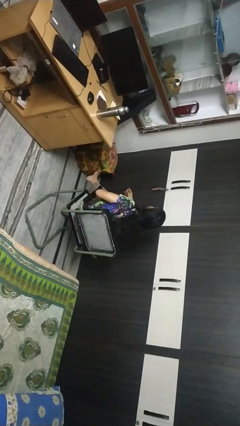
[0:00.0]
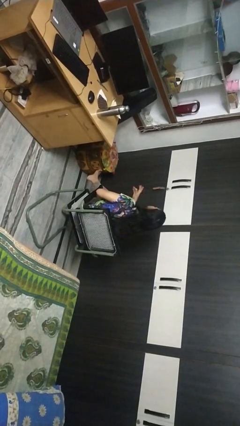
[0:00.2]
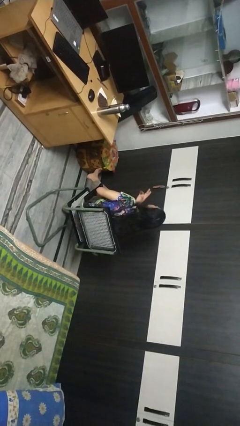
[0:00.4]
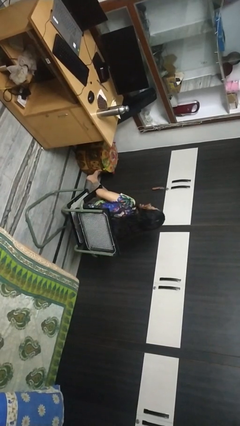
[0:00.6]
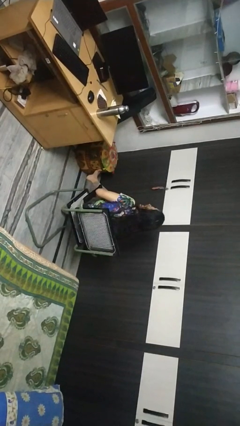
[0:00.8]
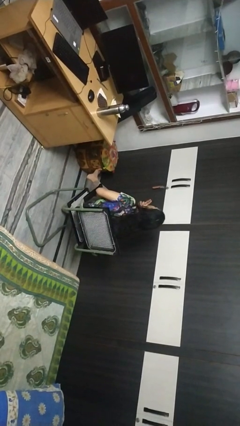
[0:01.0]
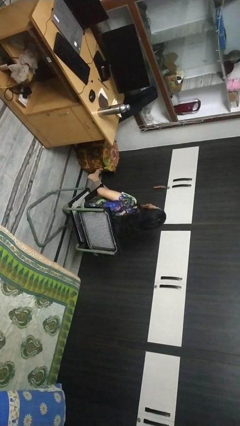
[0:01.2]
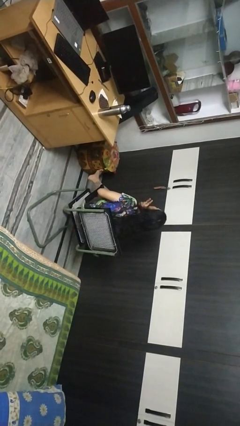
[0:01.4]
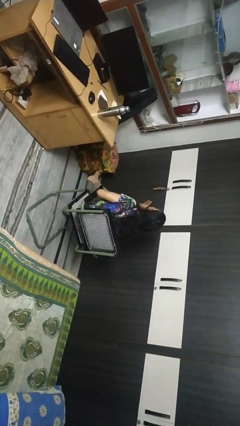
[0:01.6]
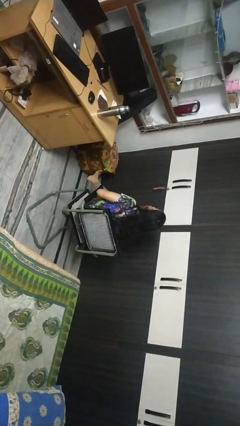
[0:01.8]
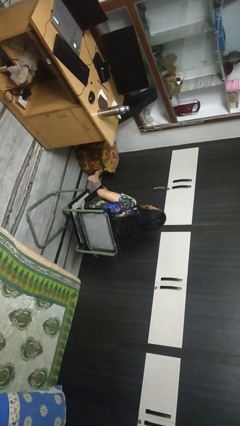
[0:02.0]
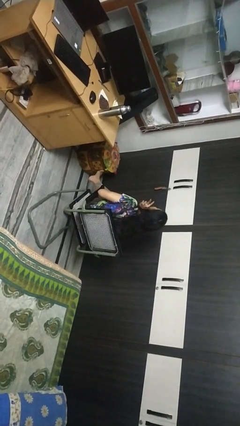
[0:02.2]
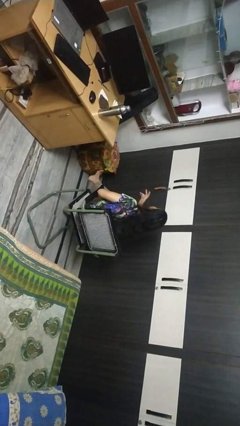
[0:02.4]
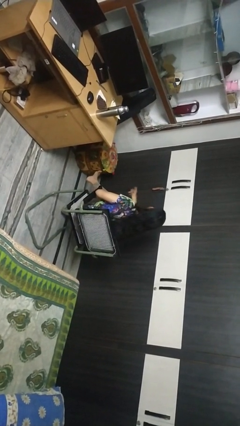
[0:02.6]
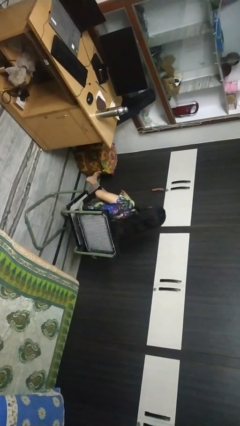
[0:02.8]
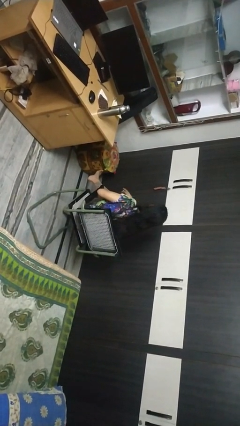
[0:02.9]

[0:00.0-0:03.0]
person strokes chin

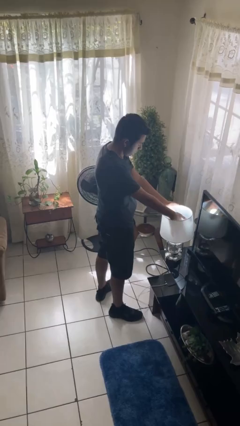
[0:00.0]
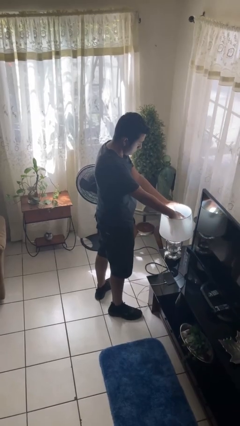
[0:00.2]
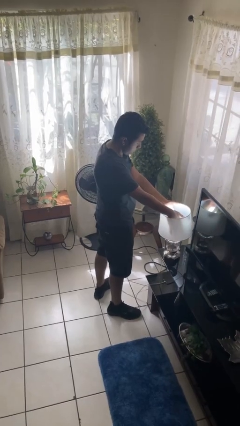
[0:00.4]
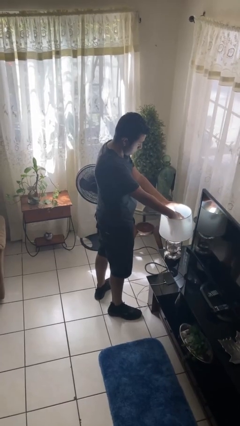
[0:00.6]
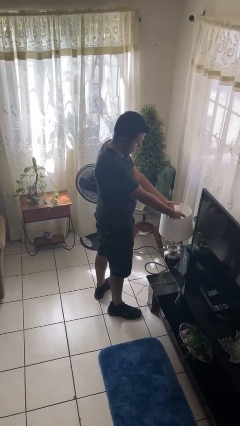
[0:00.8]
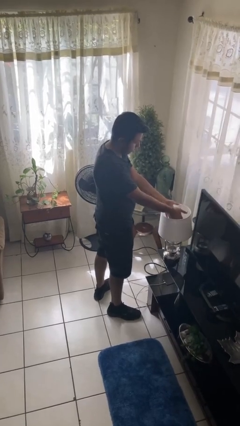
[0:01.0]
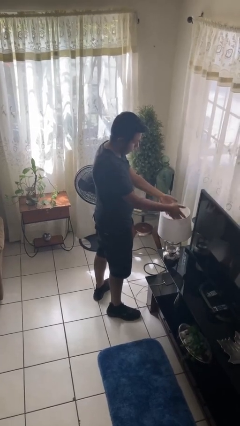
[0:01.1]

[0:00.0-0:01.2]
person turns off lamp

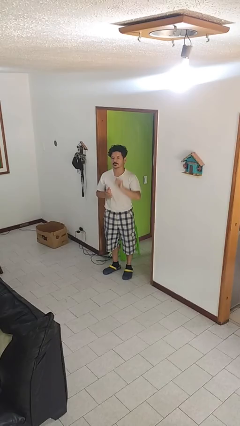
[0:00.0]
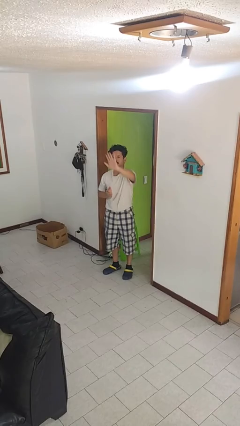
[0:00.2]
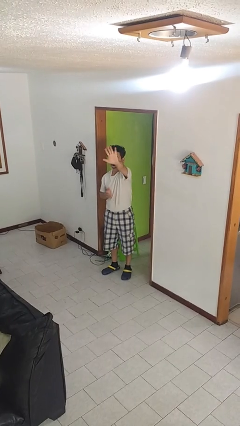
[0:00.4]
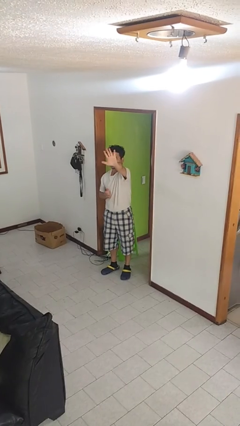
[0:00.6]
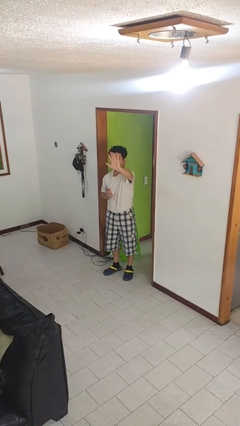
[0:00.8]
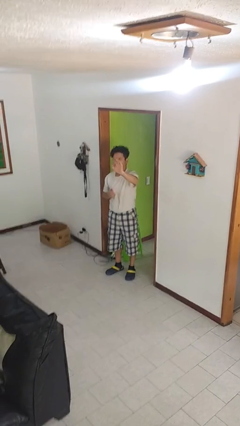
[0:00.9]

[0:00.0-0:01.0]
person gestures stop

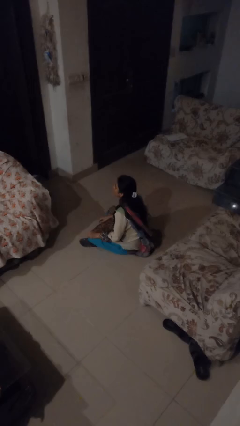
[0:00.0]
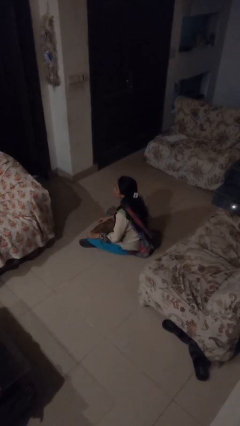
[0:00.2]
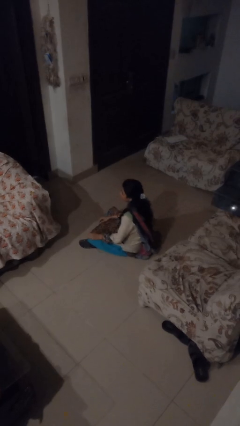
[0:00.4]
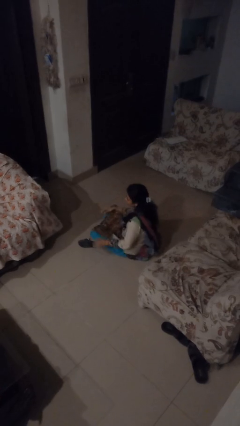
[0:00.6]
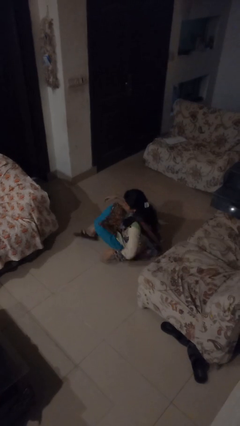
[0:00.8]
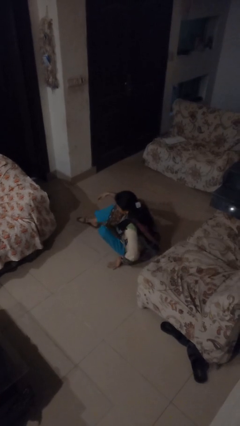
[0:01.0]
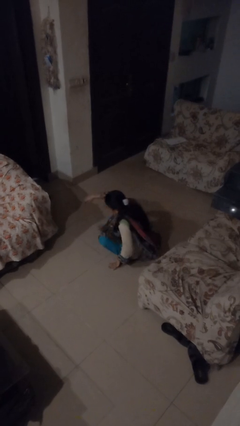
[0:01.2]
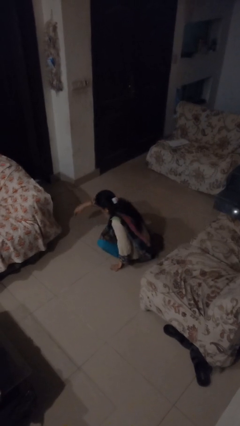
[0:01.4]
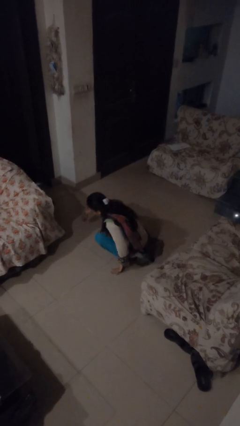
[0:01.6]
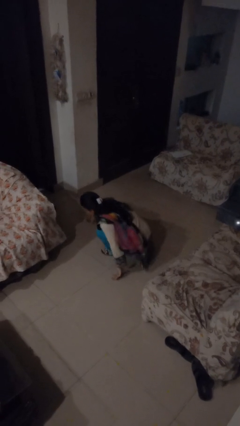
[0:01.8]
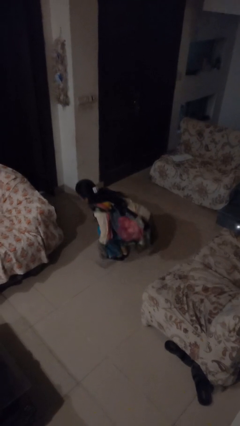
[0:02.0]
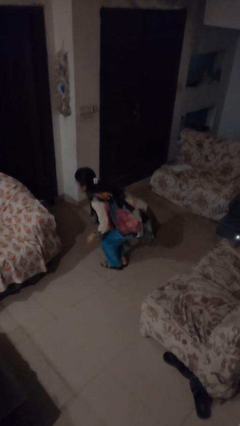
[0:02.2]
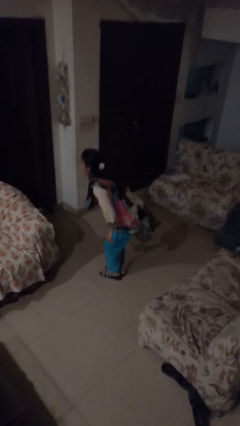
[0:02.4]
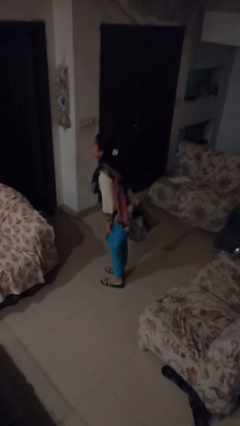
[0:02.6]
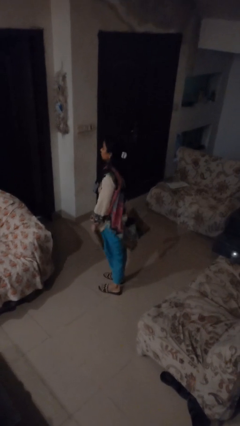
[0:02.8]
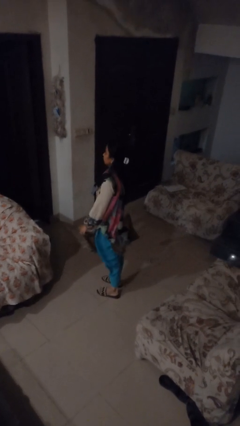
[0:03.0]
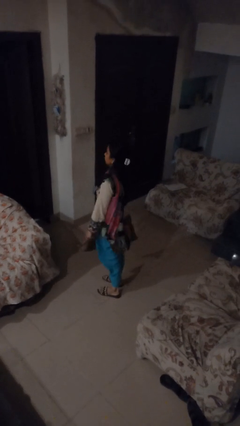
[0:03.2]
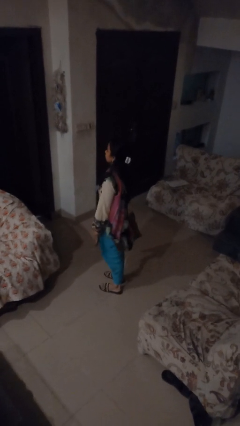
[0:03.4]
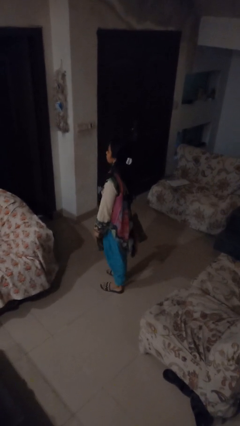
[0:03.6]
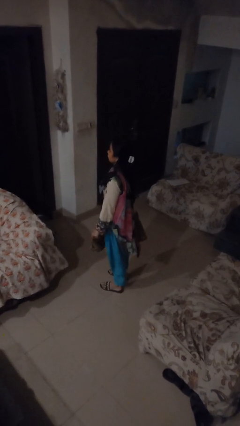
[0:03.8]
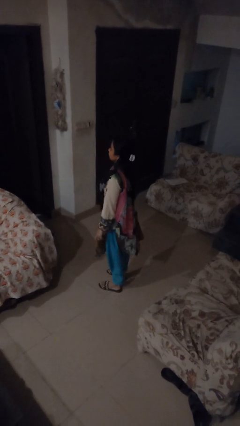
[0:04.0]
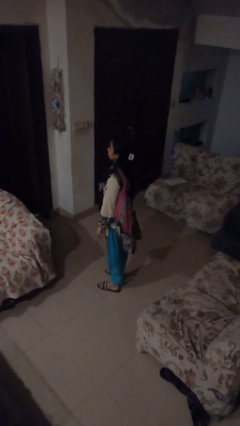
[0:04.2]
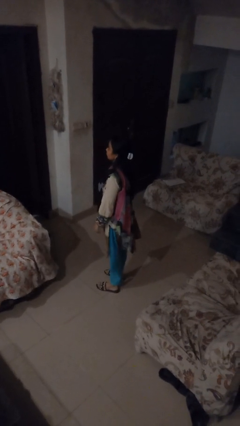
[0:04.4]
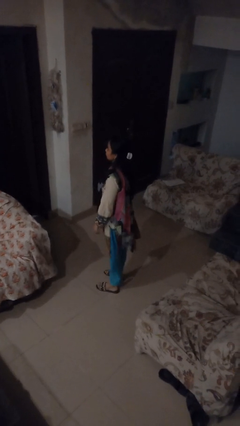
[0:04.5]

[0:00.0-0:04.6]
person stands up from floor

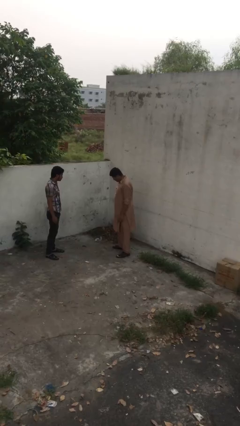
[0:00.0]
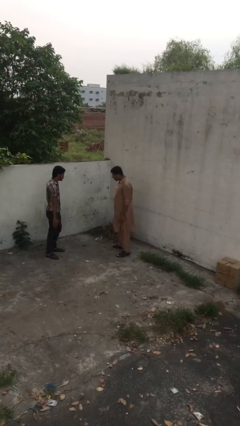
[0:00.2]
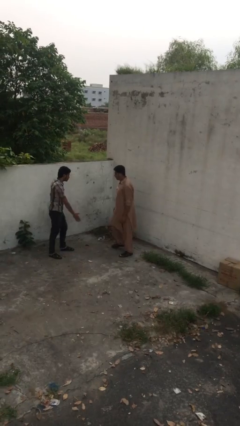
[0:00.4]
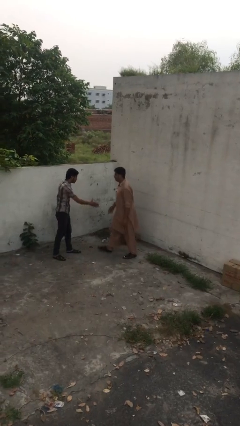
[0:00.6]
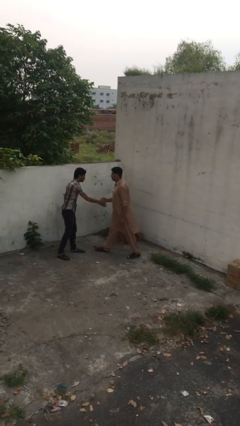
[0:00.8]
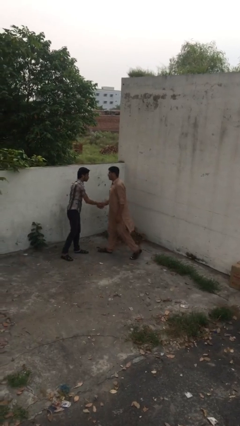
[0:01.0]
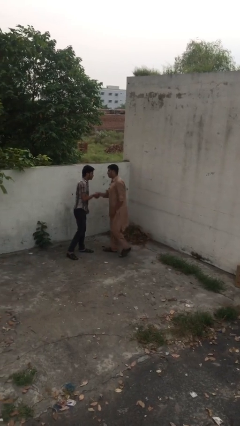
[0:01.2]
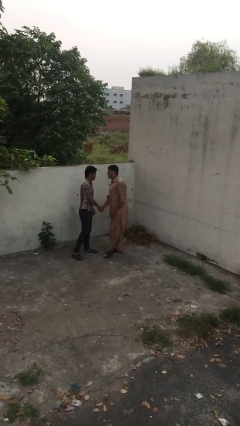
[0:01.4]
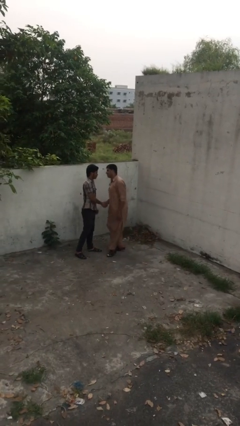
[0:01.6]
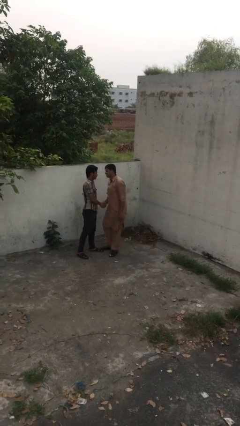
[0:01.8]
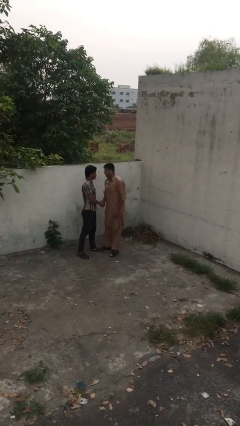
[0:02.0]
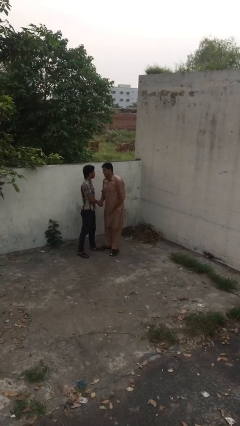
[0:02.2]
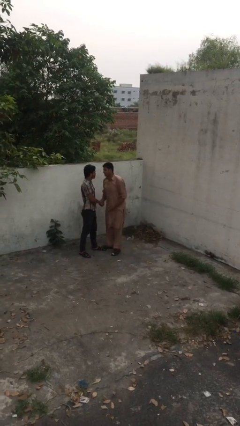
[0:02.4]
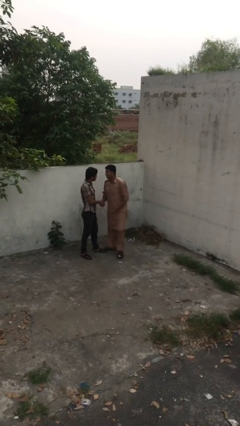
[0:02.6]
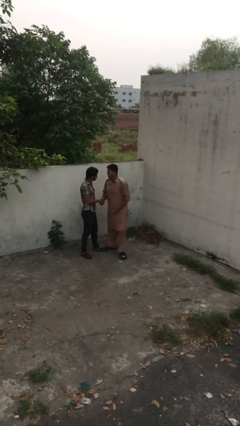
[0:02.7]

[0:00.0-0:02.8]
person shakes hand

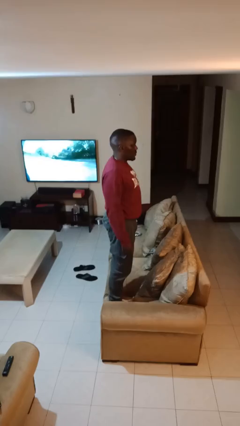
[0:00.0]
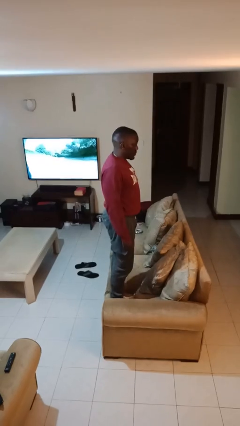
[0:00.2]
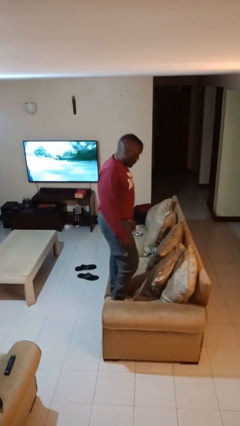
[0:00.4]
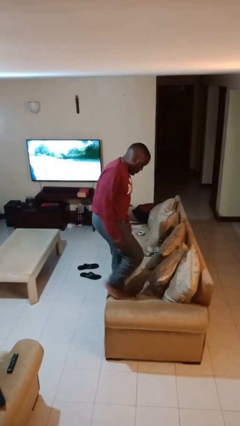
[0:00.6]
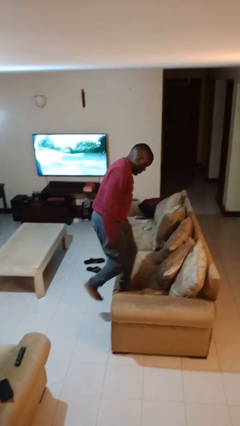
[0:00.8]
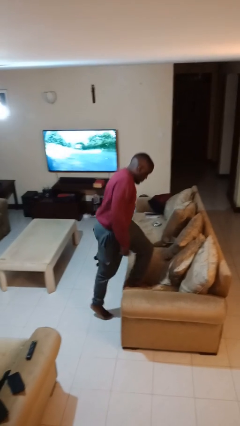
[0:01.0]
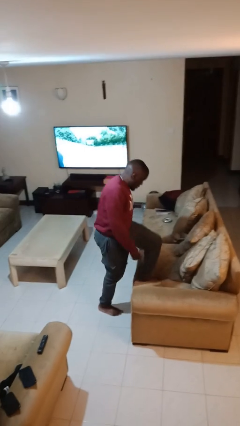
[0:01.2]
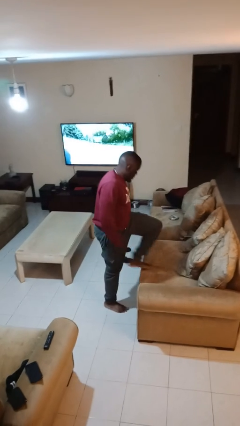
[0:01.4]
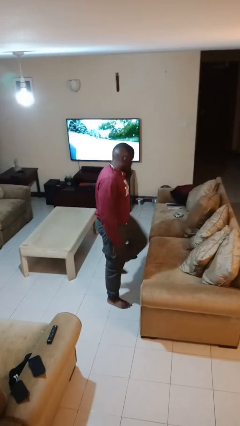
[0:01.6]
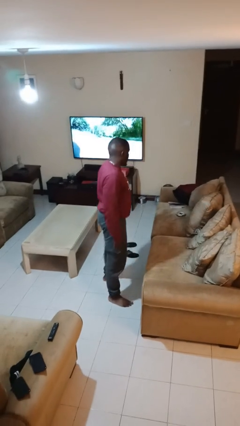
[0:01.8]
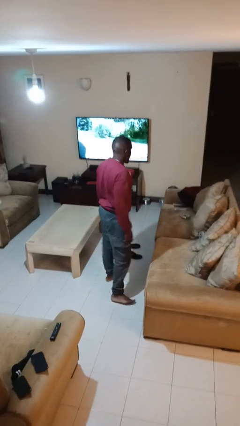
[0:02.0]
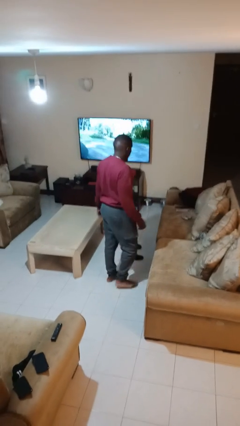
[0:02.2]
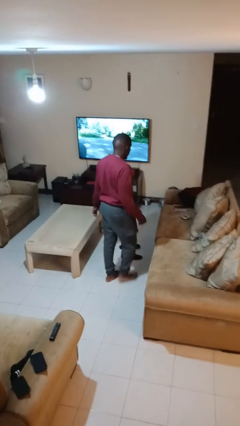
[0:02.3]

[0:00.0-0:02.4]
person climbs off couch

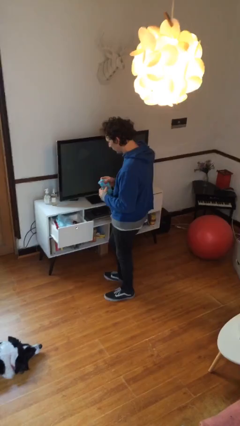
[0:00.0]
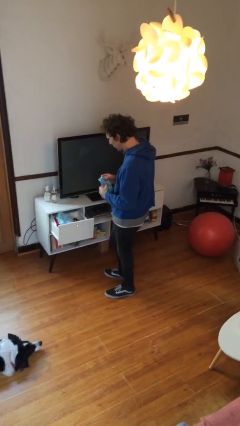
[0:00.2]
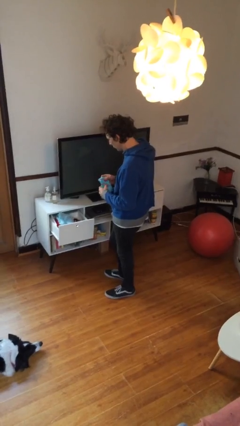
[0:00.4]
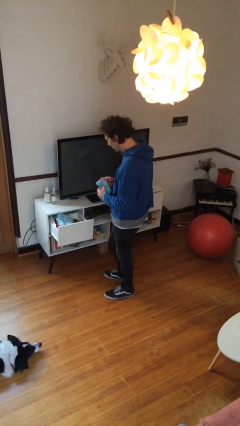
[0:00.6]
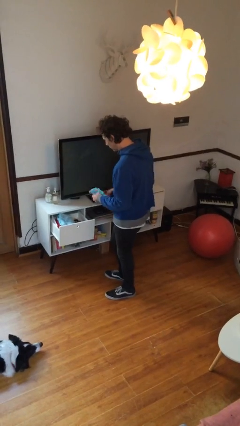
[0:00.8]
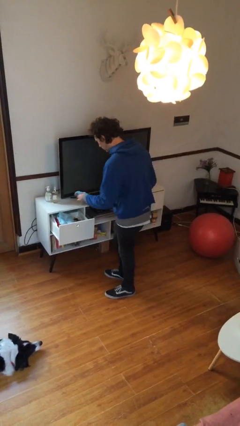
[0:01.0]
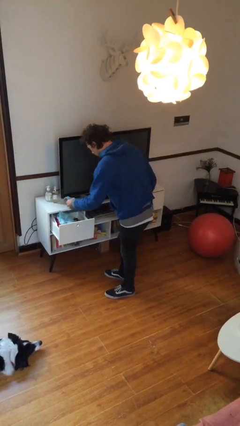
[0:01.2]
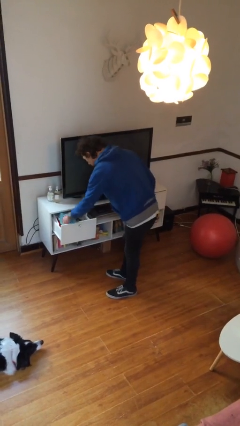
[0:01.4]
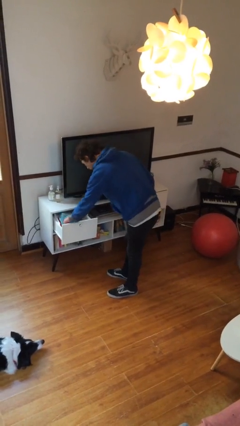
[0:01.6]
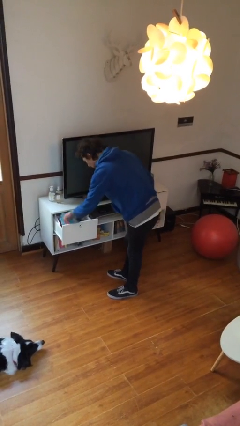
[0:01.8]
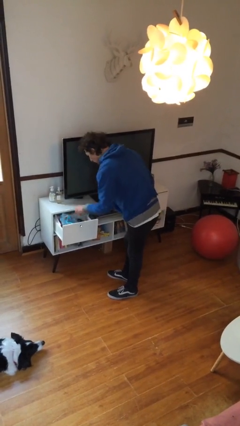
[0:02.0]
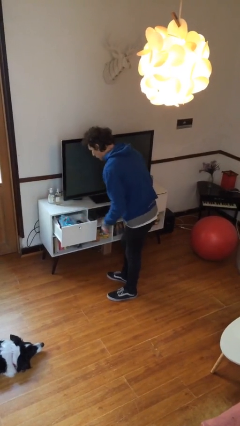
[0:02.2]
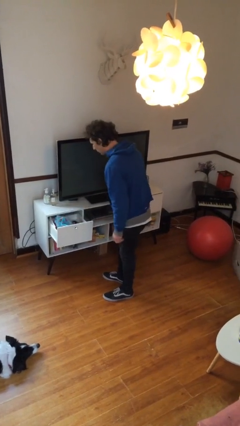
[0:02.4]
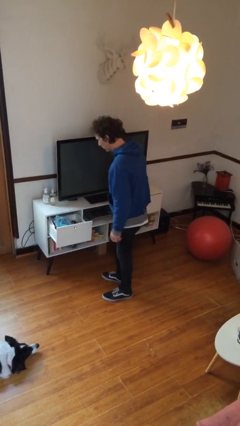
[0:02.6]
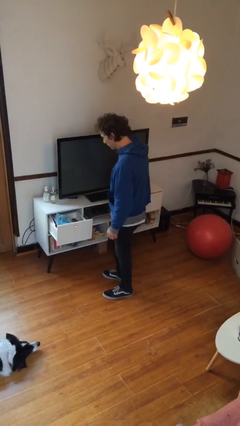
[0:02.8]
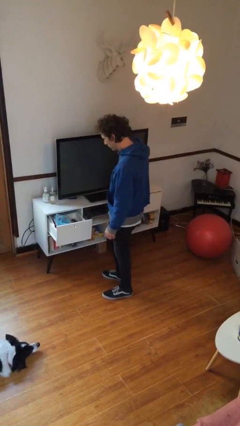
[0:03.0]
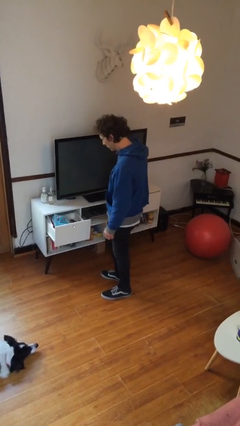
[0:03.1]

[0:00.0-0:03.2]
person puts clothes into dresser
